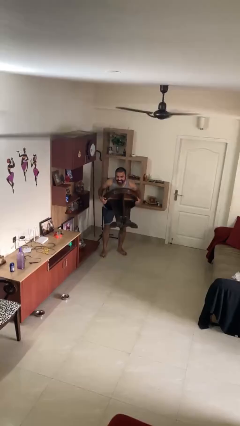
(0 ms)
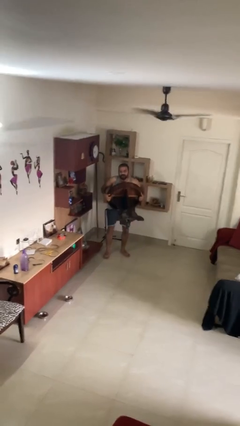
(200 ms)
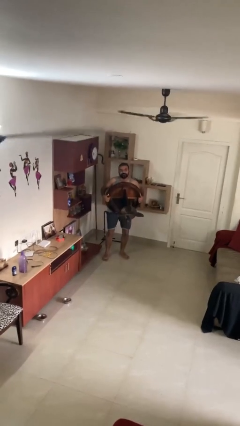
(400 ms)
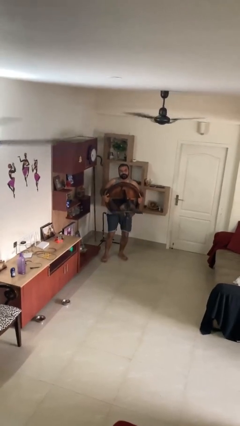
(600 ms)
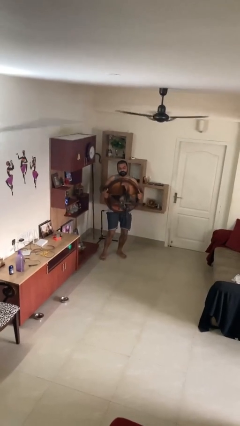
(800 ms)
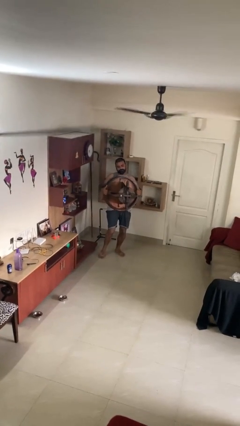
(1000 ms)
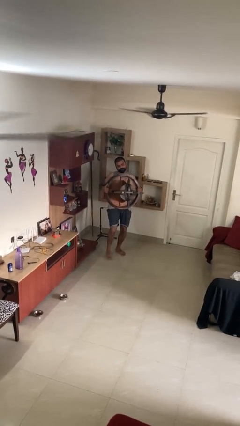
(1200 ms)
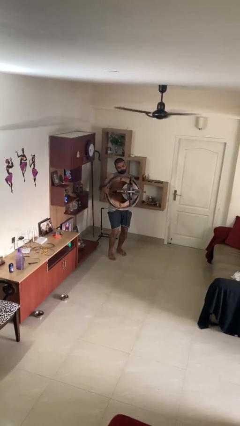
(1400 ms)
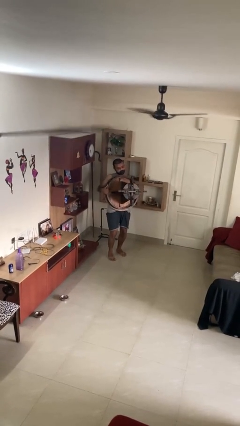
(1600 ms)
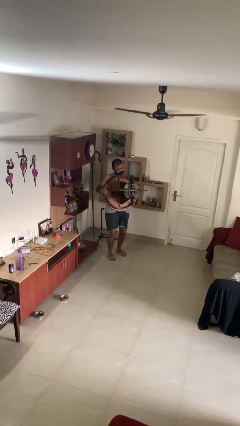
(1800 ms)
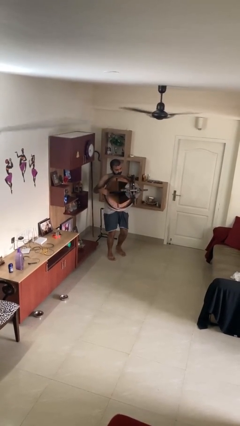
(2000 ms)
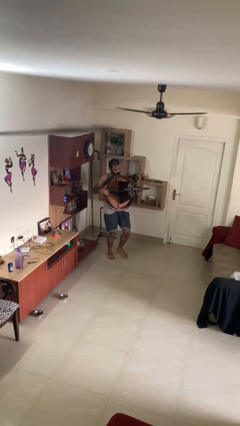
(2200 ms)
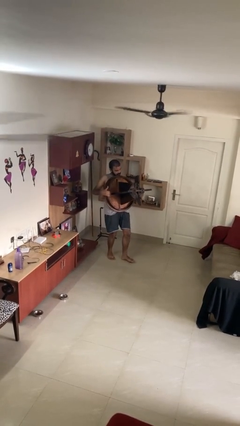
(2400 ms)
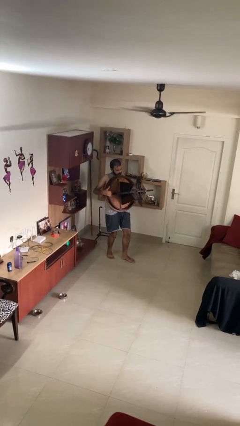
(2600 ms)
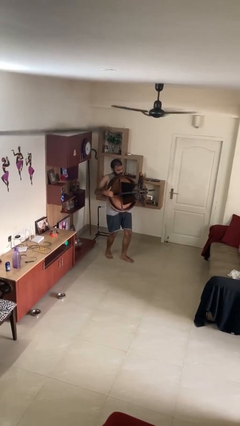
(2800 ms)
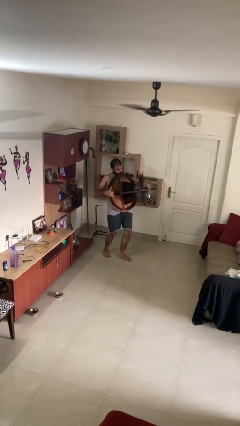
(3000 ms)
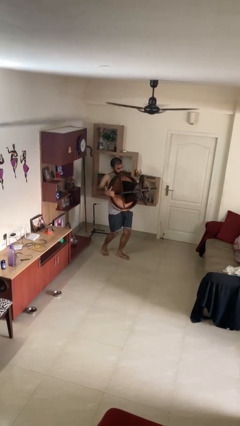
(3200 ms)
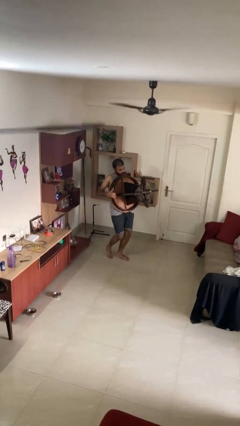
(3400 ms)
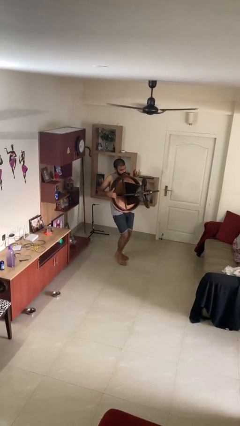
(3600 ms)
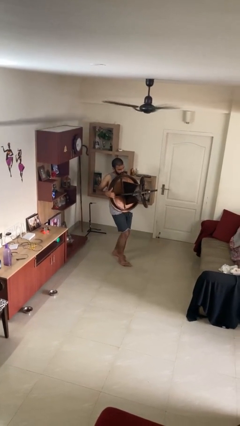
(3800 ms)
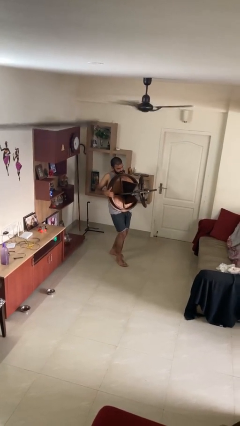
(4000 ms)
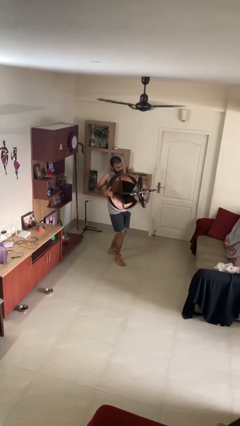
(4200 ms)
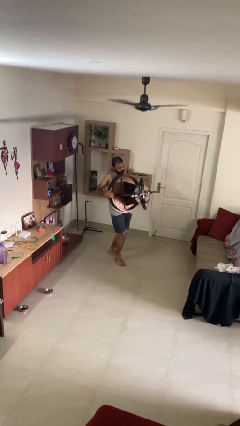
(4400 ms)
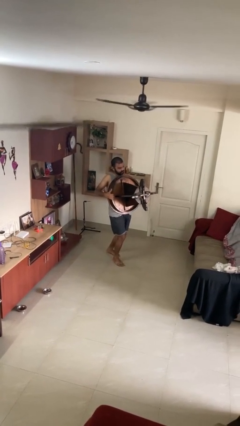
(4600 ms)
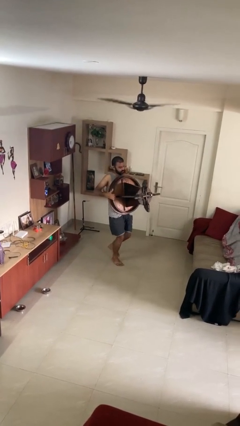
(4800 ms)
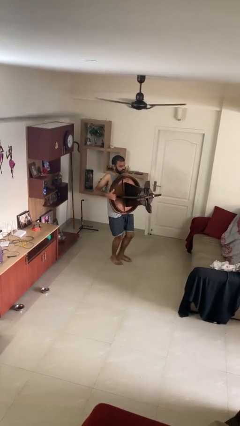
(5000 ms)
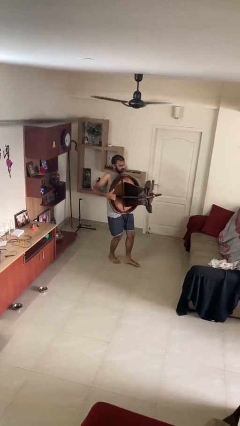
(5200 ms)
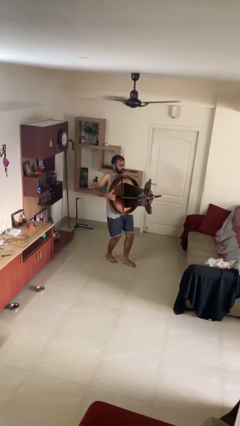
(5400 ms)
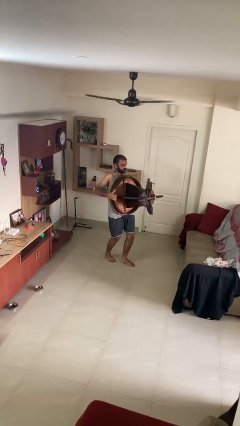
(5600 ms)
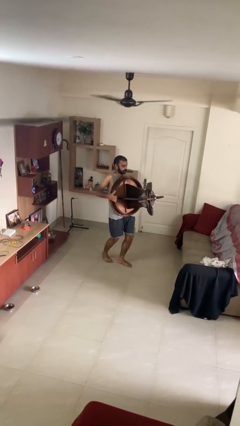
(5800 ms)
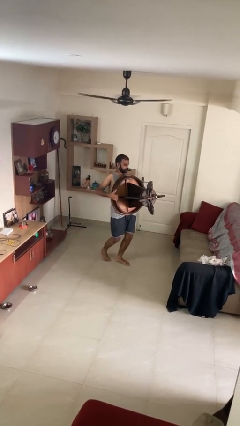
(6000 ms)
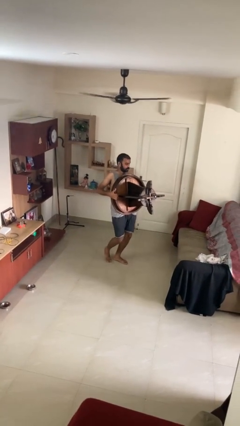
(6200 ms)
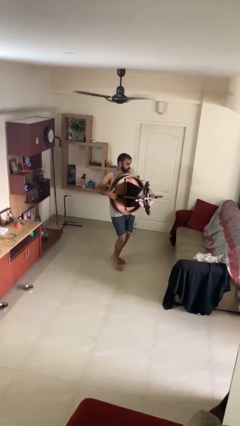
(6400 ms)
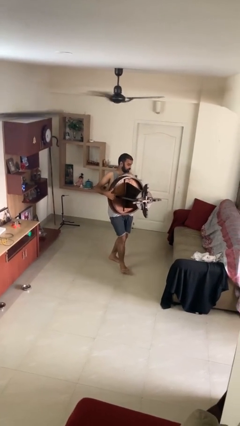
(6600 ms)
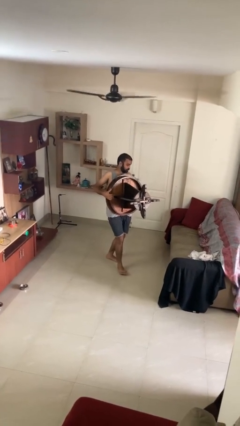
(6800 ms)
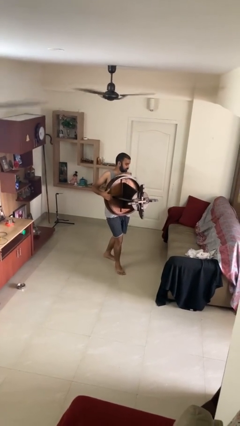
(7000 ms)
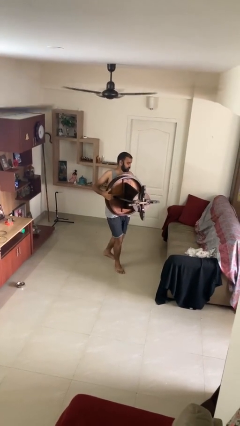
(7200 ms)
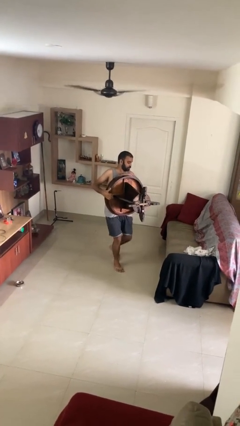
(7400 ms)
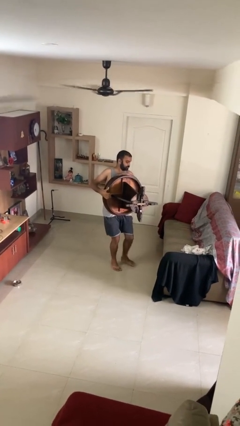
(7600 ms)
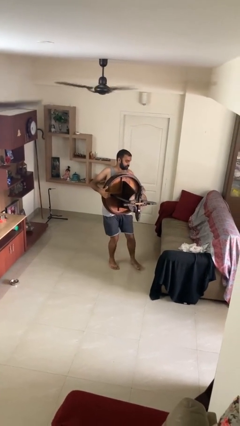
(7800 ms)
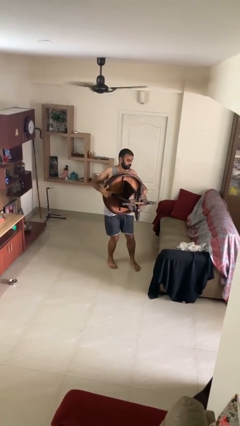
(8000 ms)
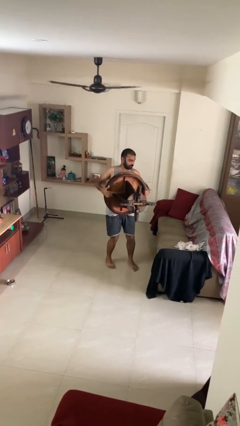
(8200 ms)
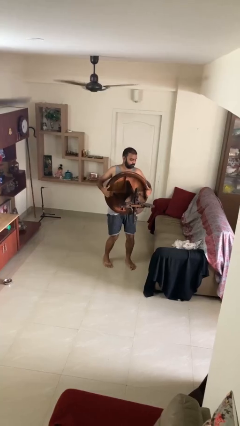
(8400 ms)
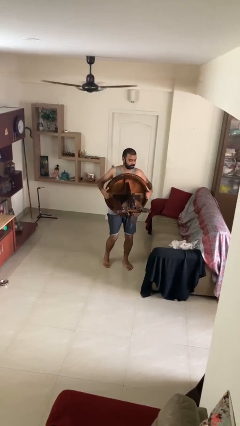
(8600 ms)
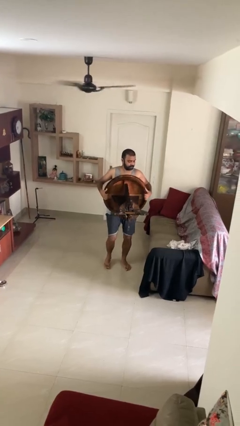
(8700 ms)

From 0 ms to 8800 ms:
person carries heavy object

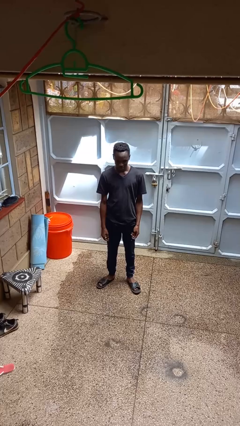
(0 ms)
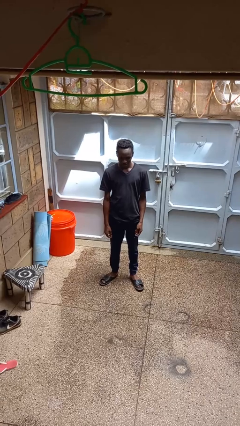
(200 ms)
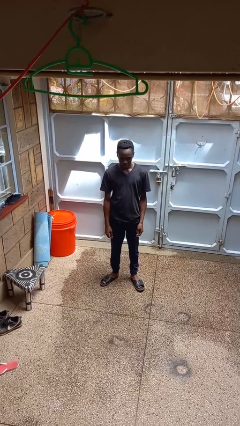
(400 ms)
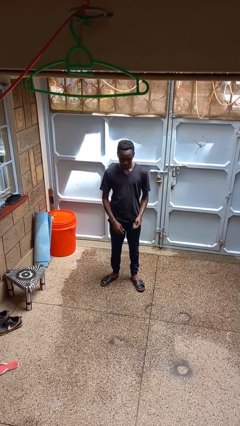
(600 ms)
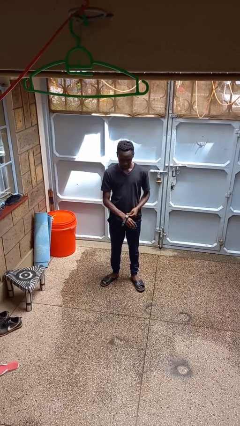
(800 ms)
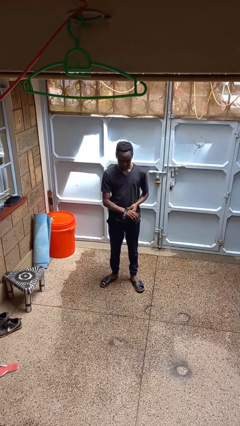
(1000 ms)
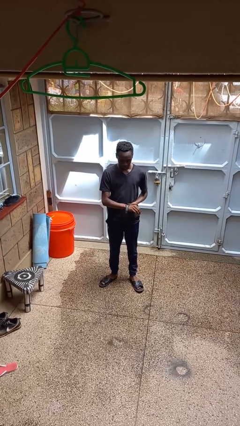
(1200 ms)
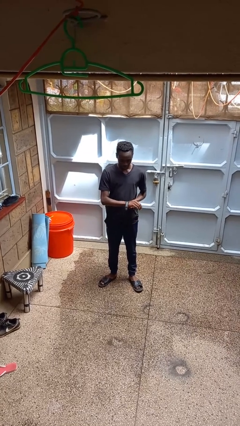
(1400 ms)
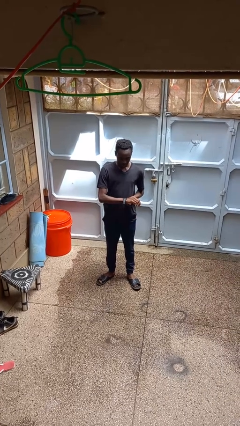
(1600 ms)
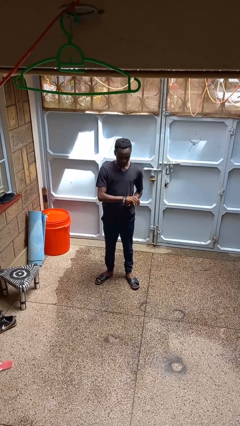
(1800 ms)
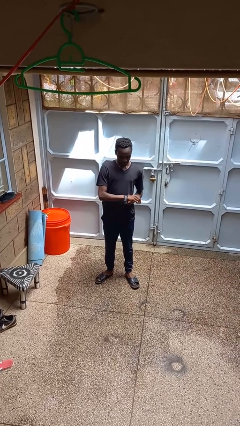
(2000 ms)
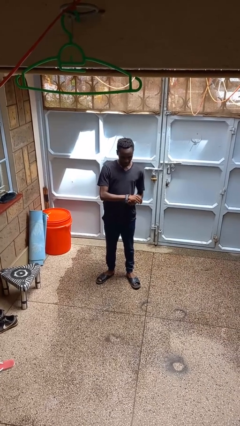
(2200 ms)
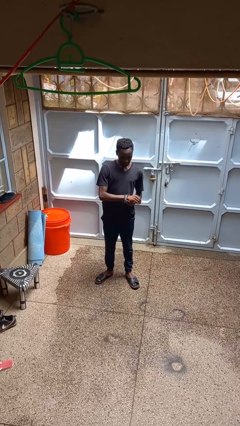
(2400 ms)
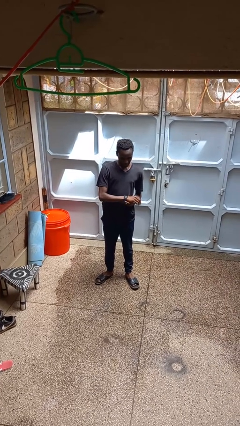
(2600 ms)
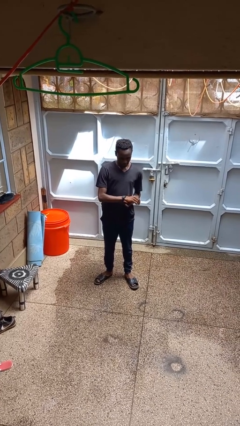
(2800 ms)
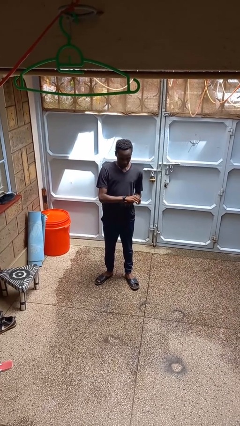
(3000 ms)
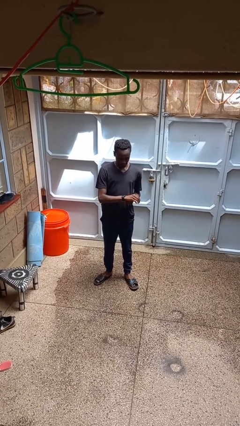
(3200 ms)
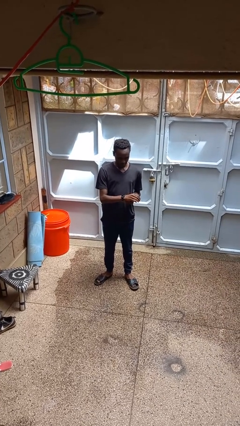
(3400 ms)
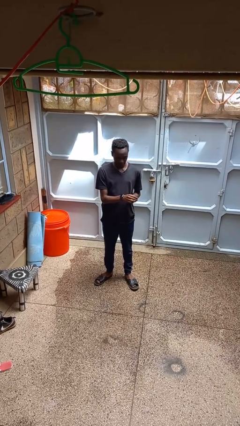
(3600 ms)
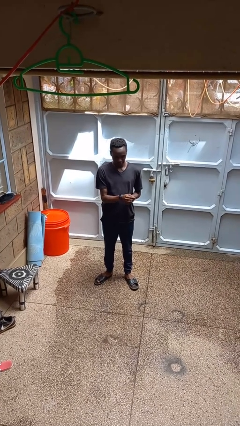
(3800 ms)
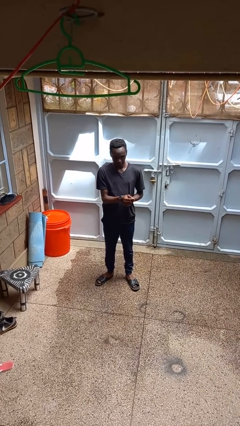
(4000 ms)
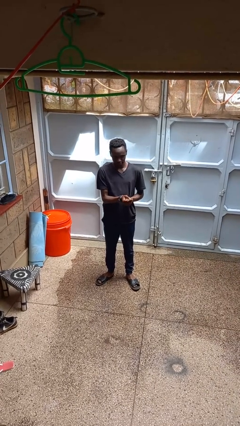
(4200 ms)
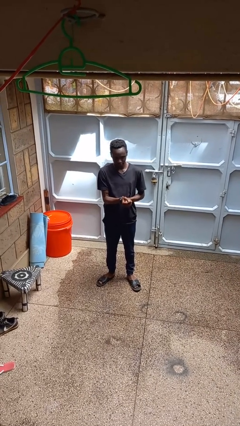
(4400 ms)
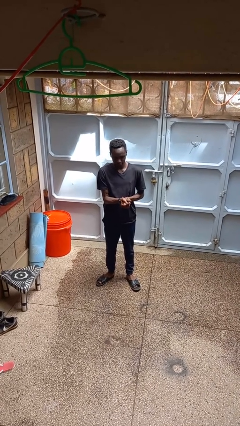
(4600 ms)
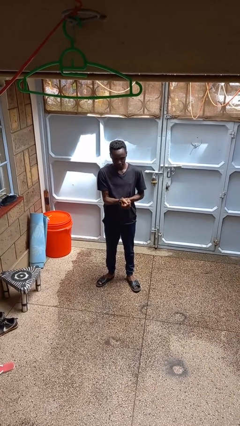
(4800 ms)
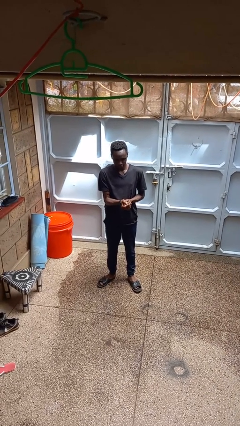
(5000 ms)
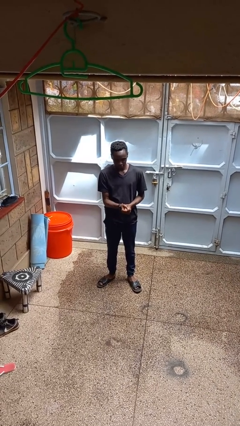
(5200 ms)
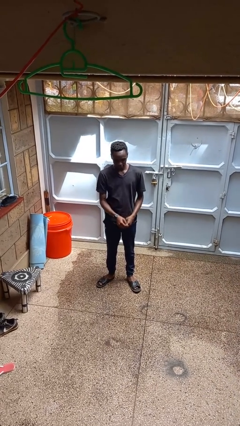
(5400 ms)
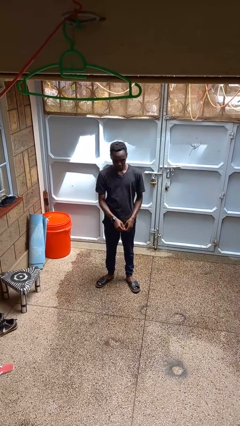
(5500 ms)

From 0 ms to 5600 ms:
person puts on wristwatch

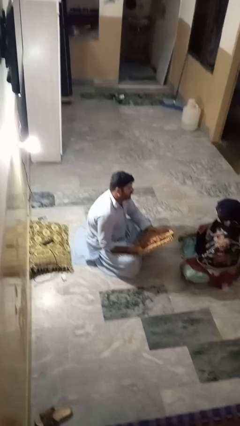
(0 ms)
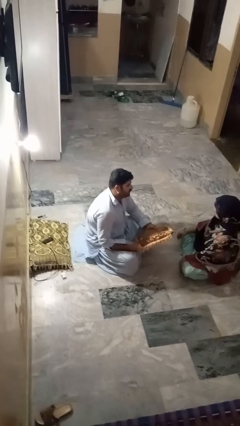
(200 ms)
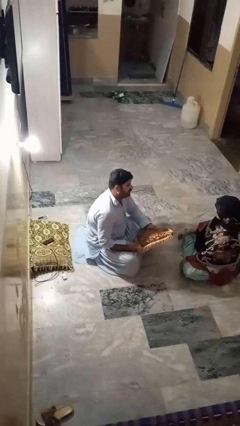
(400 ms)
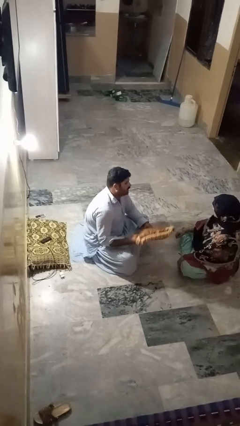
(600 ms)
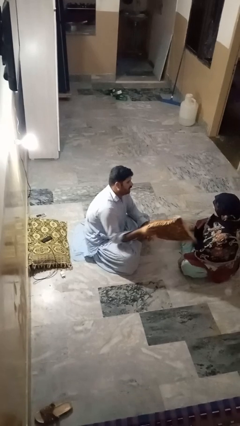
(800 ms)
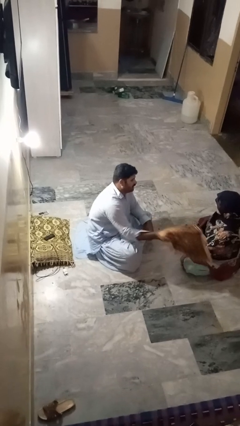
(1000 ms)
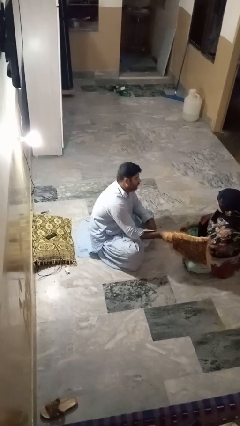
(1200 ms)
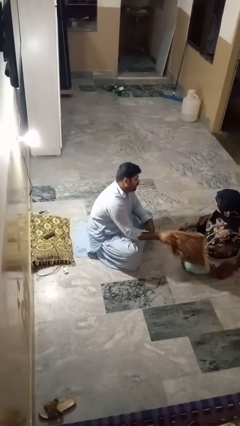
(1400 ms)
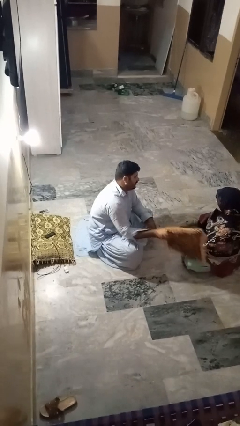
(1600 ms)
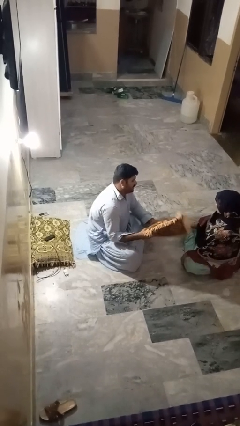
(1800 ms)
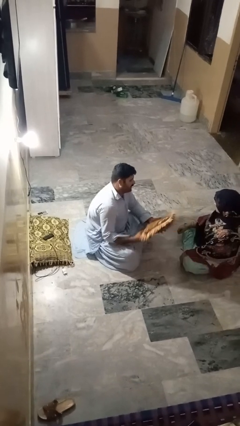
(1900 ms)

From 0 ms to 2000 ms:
person hits person with pillow

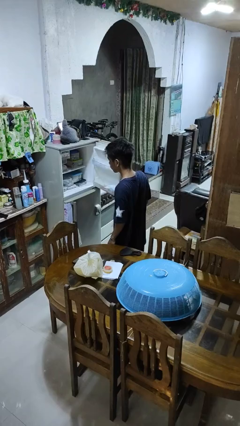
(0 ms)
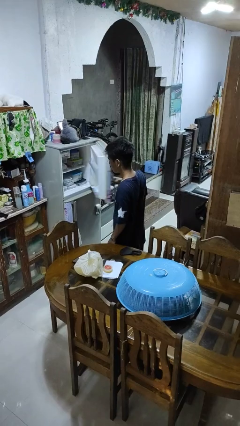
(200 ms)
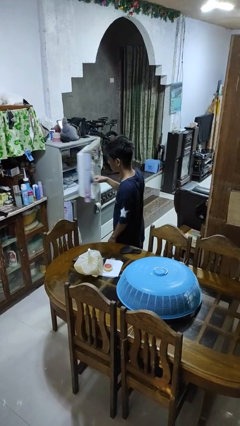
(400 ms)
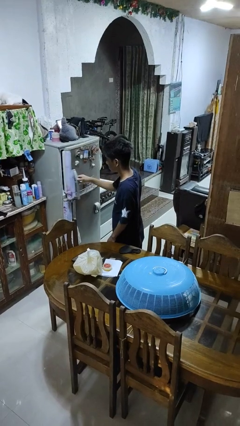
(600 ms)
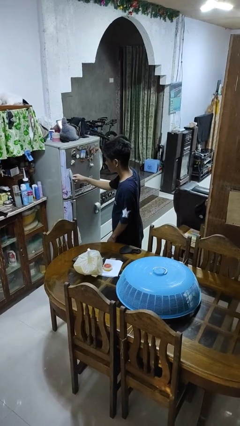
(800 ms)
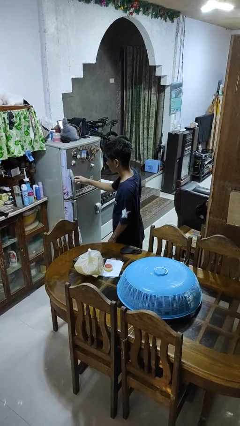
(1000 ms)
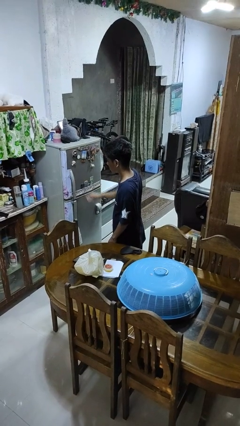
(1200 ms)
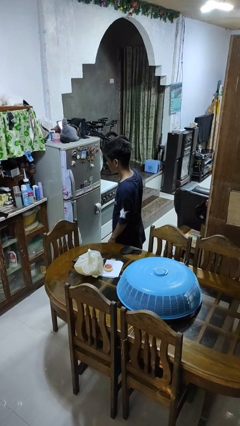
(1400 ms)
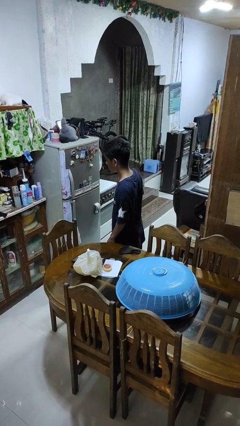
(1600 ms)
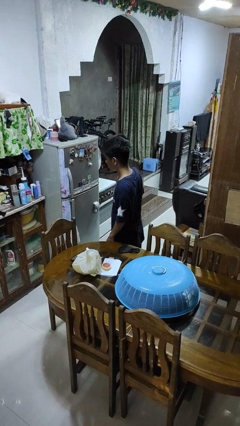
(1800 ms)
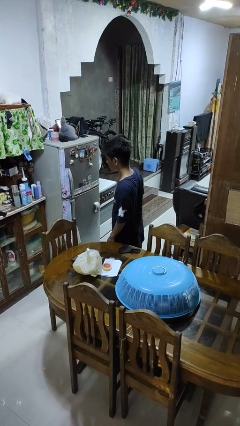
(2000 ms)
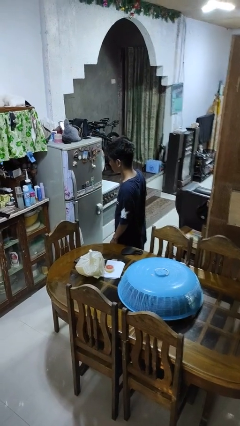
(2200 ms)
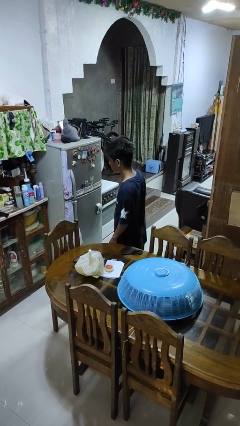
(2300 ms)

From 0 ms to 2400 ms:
person closes refrigerator
